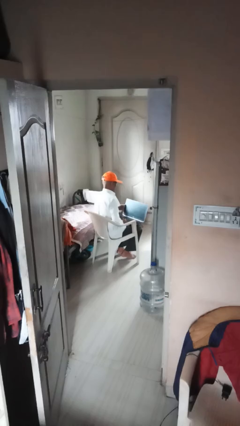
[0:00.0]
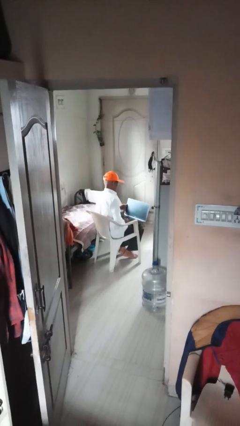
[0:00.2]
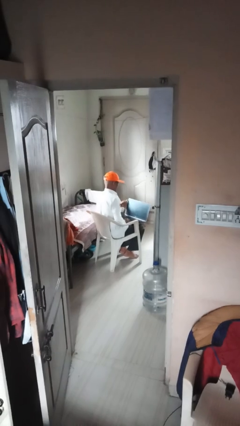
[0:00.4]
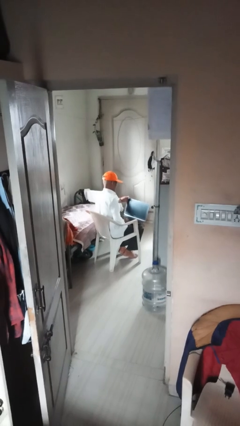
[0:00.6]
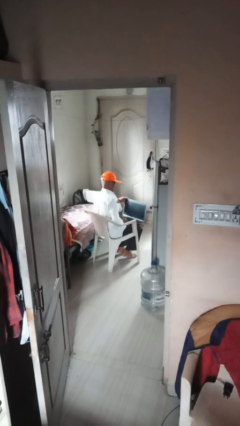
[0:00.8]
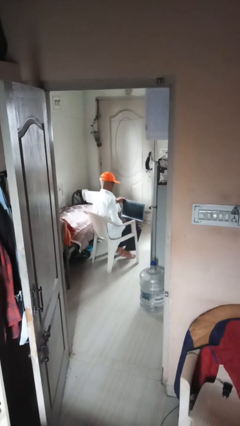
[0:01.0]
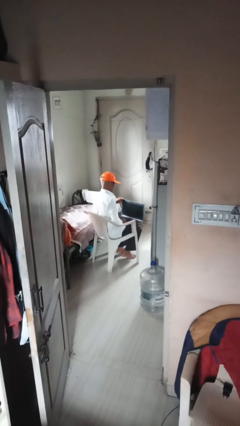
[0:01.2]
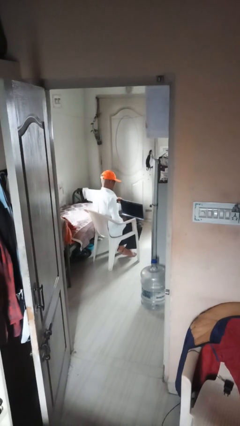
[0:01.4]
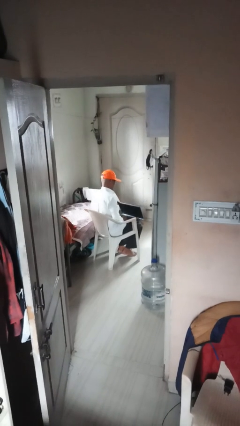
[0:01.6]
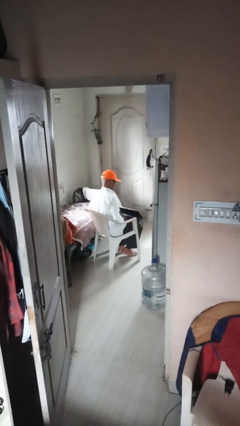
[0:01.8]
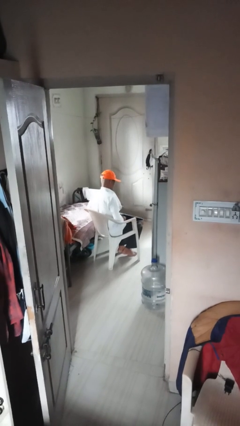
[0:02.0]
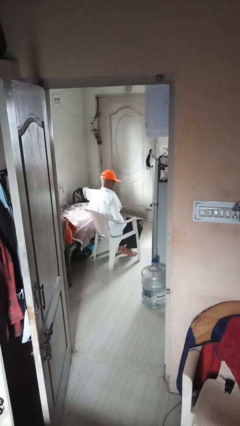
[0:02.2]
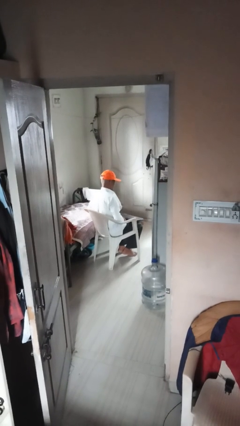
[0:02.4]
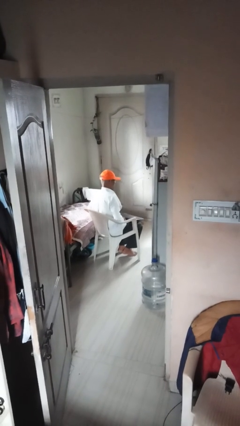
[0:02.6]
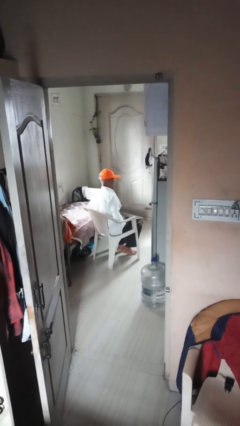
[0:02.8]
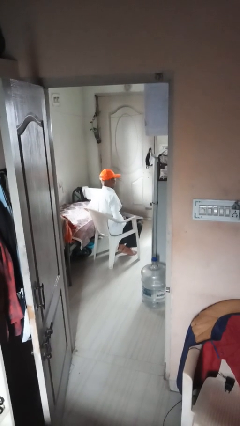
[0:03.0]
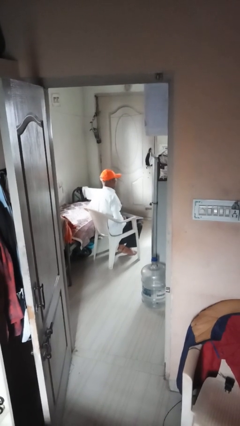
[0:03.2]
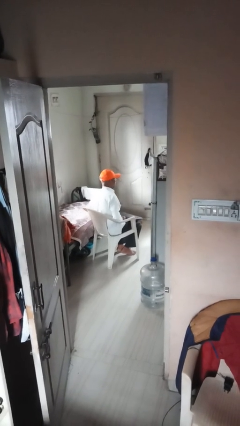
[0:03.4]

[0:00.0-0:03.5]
person closes laptop

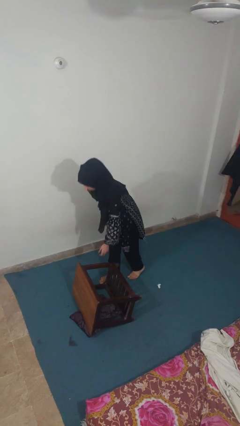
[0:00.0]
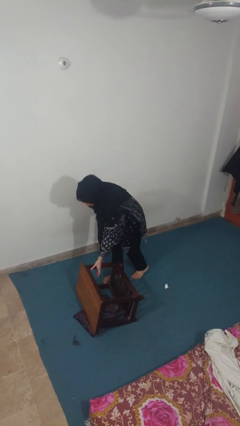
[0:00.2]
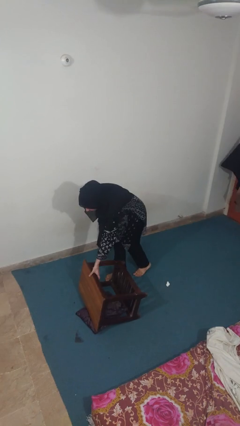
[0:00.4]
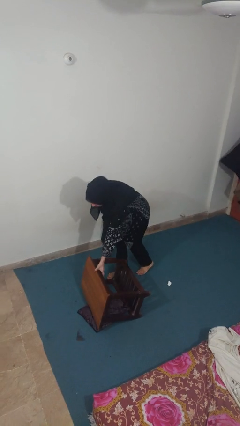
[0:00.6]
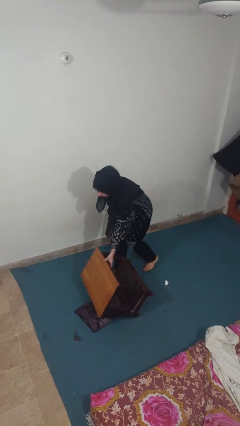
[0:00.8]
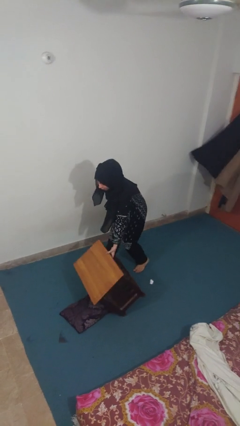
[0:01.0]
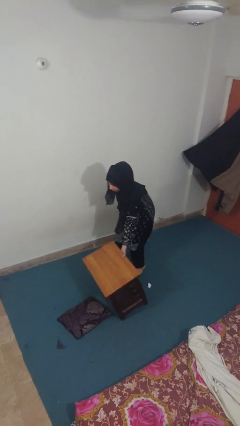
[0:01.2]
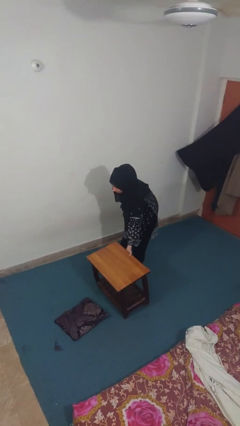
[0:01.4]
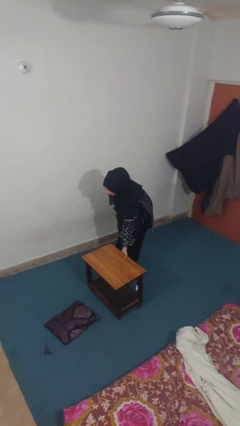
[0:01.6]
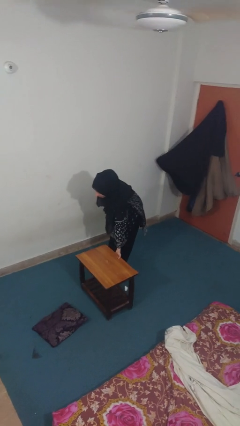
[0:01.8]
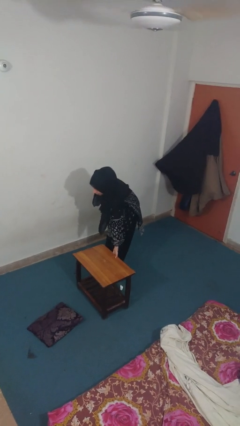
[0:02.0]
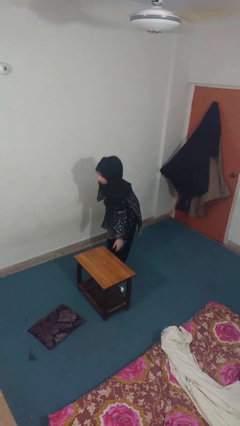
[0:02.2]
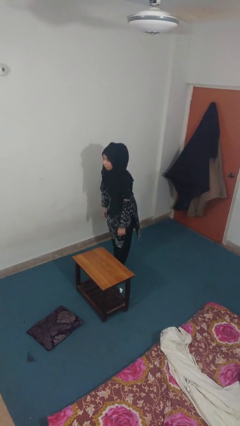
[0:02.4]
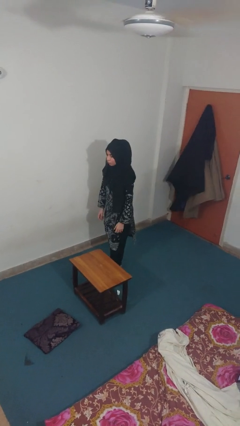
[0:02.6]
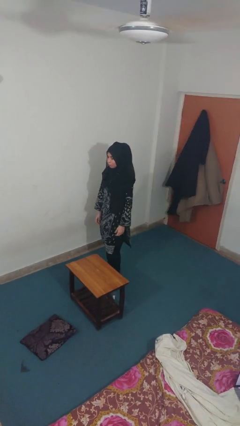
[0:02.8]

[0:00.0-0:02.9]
person sets upright furniture

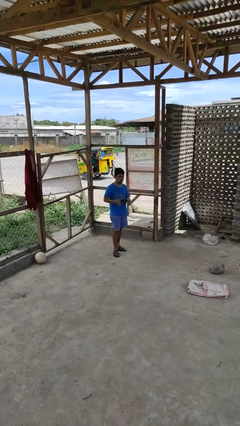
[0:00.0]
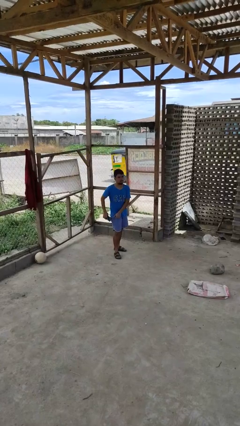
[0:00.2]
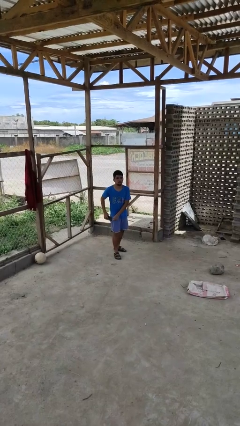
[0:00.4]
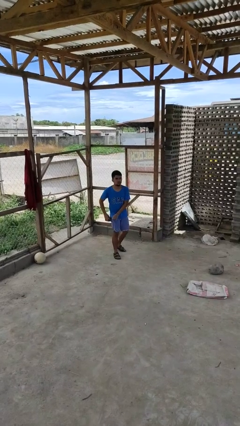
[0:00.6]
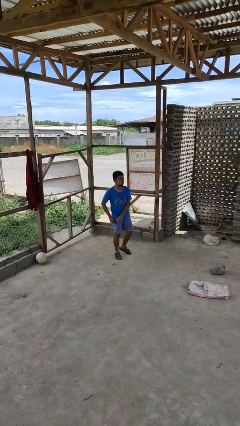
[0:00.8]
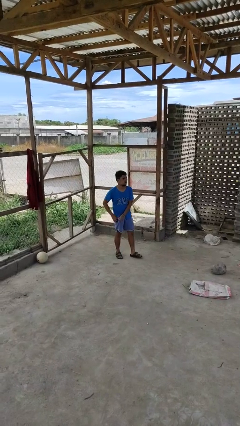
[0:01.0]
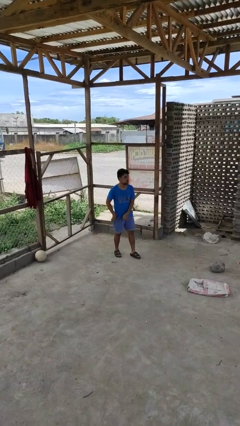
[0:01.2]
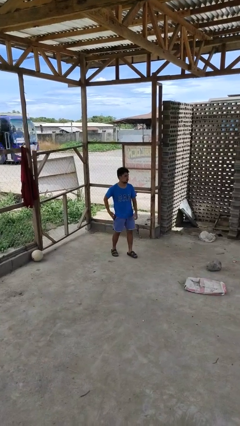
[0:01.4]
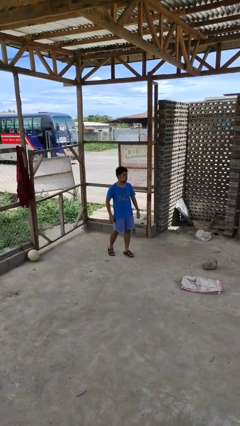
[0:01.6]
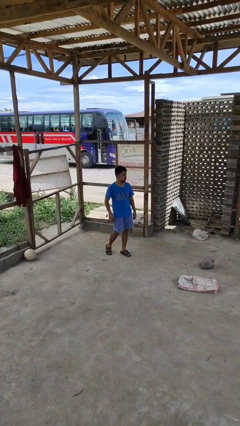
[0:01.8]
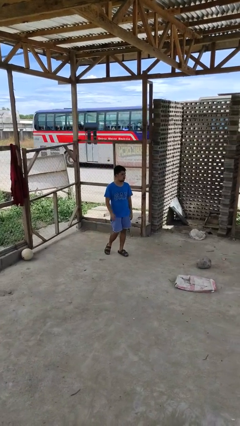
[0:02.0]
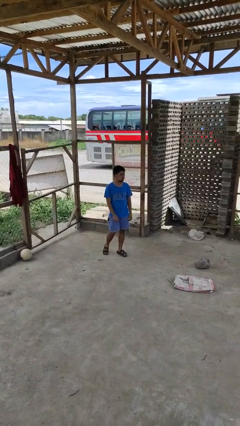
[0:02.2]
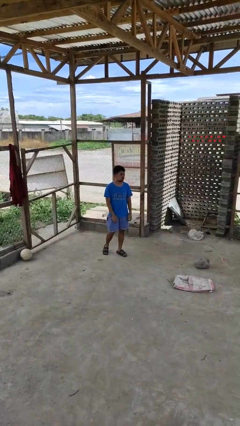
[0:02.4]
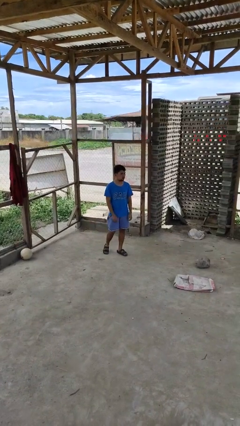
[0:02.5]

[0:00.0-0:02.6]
person puts phone into pocket

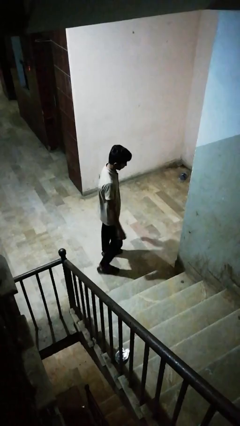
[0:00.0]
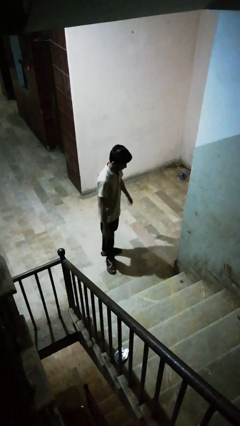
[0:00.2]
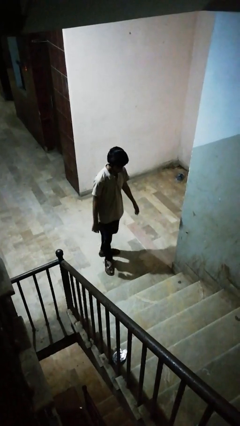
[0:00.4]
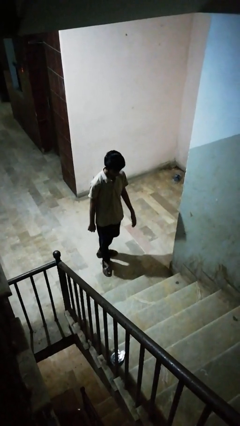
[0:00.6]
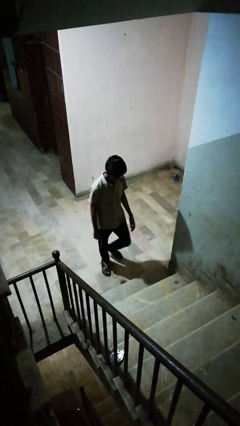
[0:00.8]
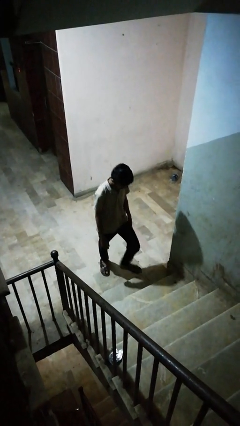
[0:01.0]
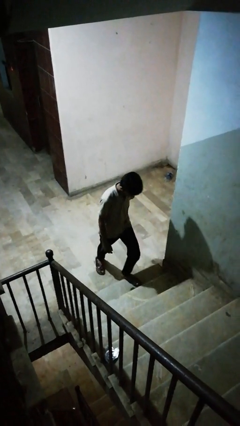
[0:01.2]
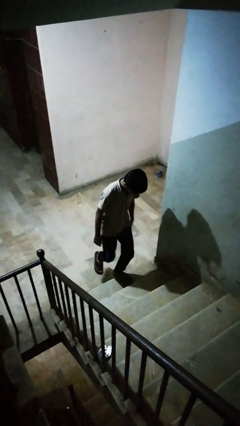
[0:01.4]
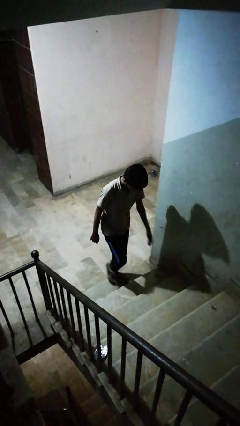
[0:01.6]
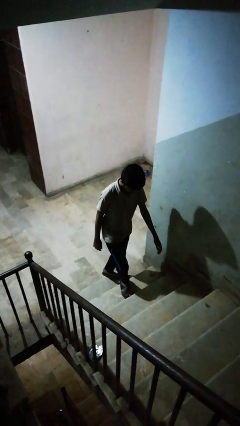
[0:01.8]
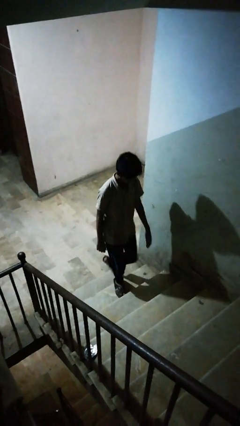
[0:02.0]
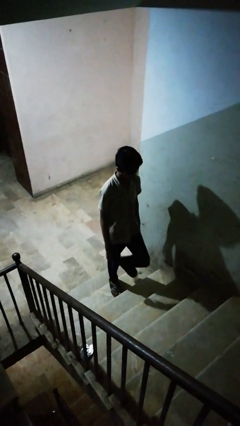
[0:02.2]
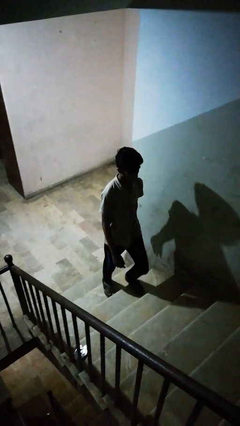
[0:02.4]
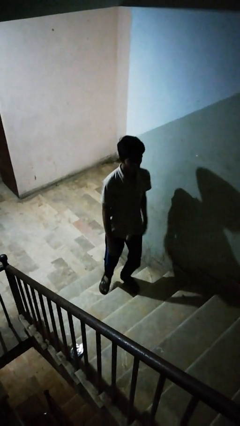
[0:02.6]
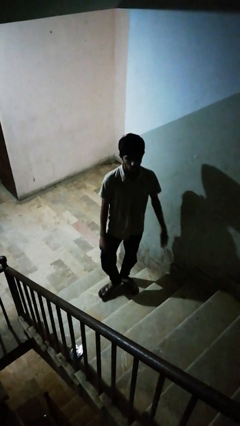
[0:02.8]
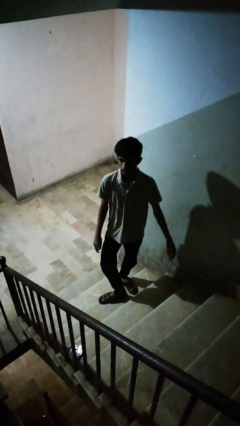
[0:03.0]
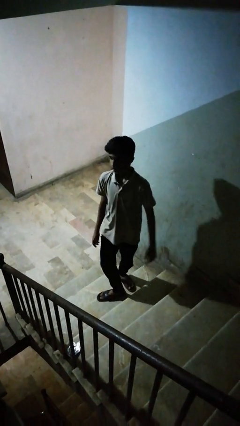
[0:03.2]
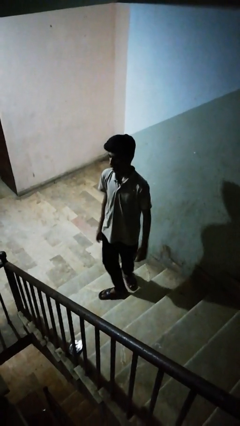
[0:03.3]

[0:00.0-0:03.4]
person climbs up stairs

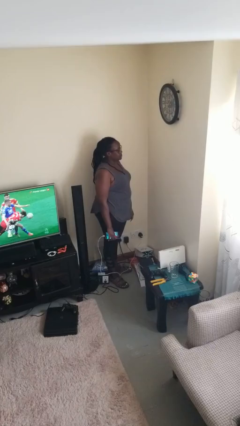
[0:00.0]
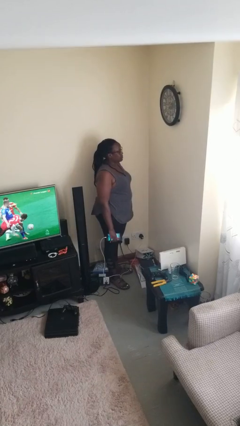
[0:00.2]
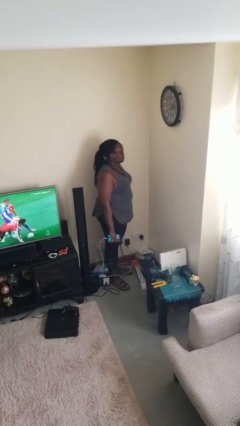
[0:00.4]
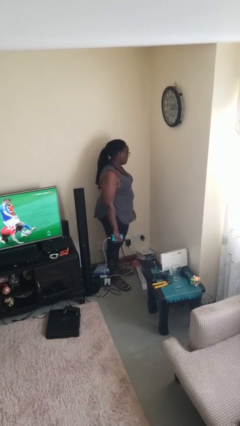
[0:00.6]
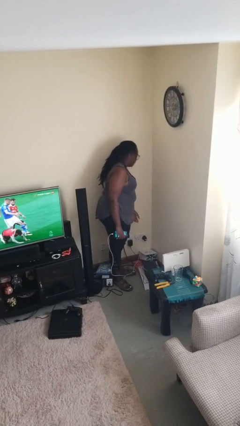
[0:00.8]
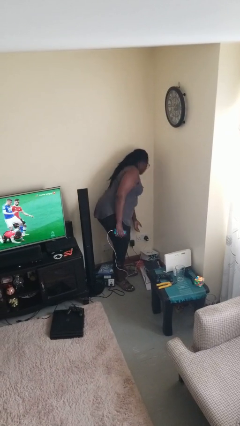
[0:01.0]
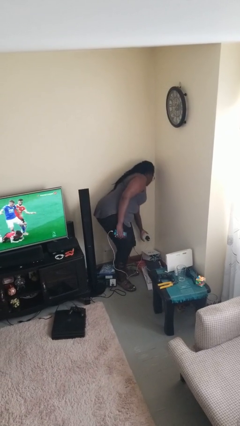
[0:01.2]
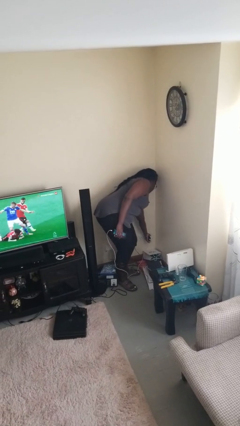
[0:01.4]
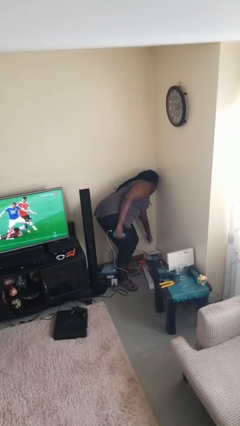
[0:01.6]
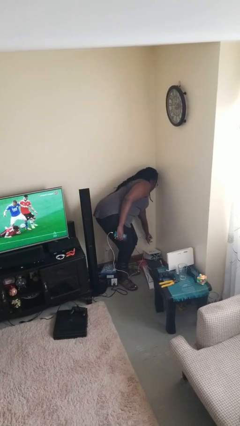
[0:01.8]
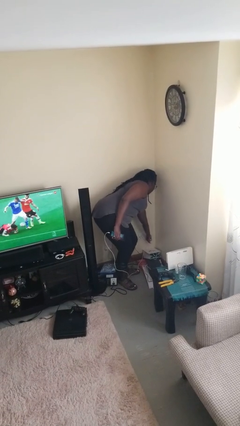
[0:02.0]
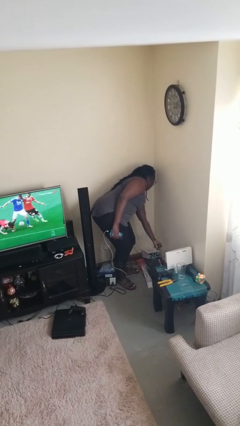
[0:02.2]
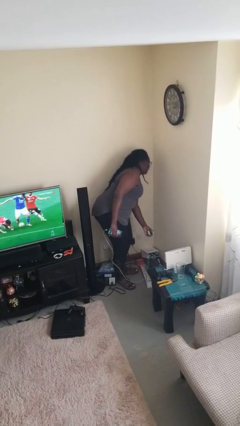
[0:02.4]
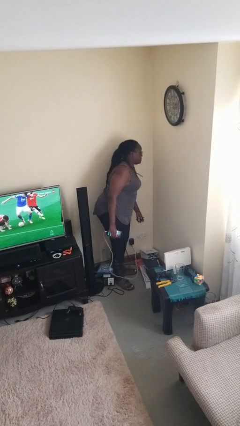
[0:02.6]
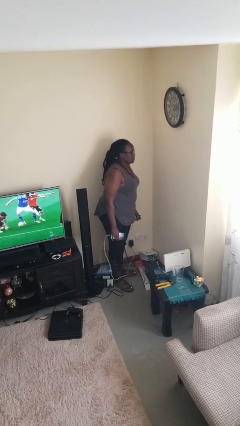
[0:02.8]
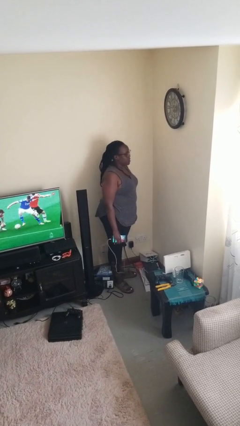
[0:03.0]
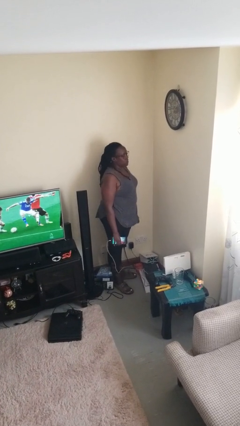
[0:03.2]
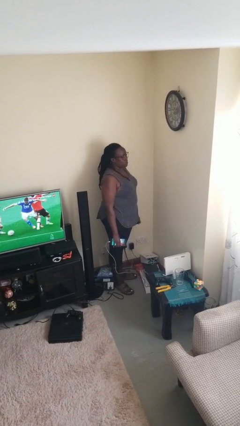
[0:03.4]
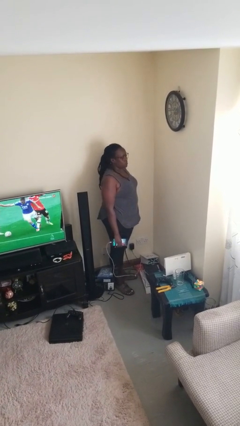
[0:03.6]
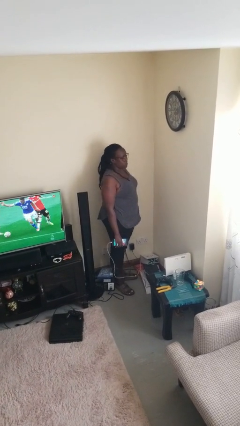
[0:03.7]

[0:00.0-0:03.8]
person unplugs from electrical socket

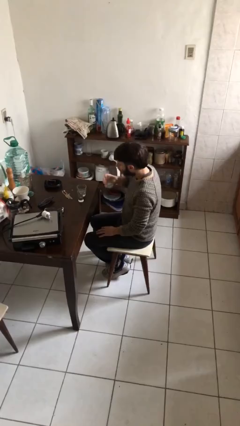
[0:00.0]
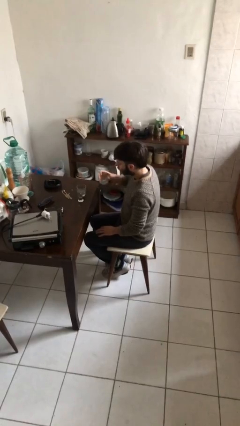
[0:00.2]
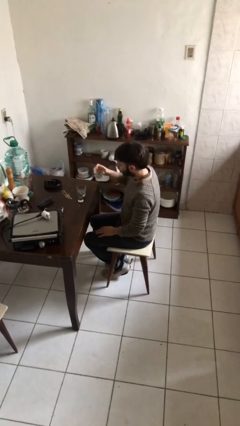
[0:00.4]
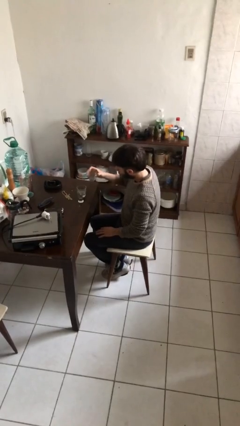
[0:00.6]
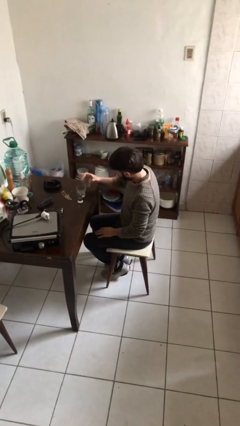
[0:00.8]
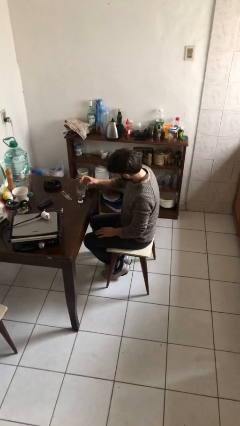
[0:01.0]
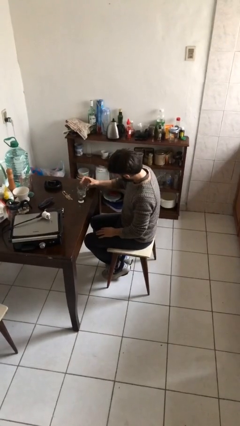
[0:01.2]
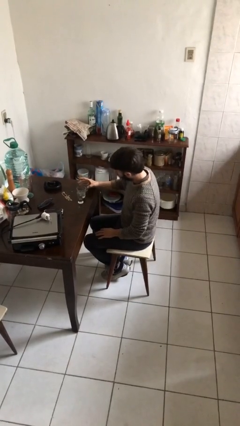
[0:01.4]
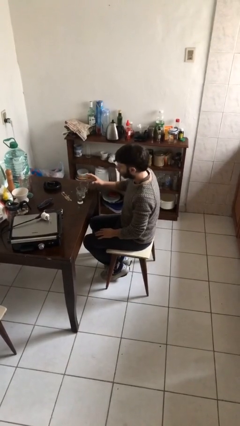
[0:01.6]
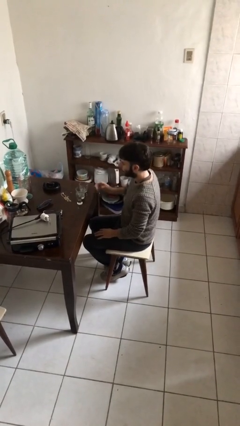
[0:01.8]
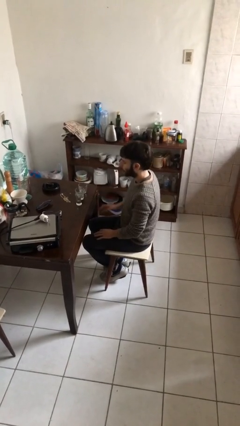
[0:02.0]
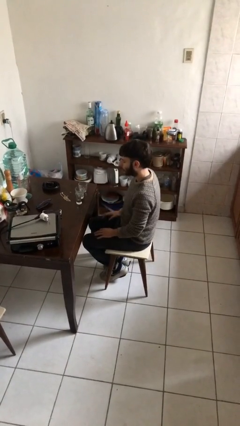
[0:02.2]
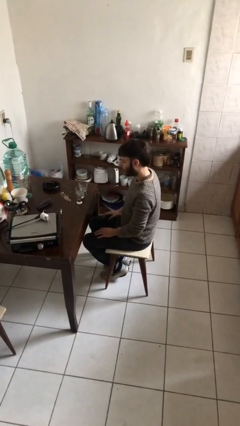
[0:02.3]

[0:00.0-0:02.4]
person puts down object on table
